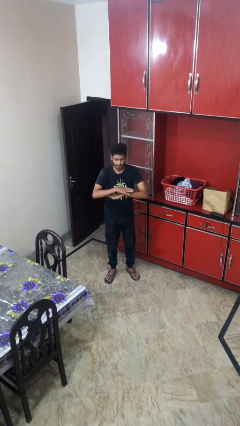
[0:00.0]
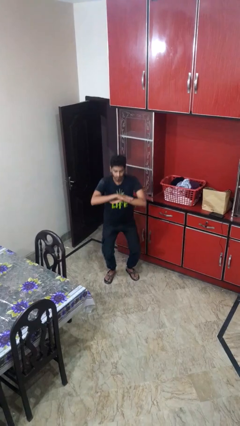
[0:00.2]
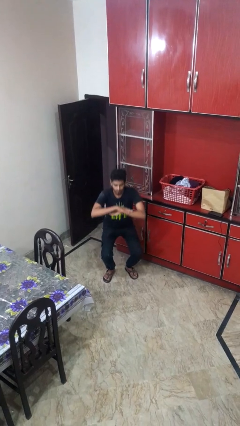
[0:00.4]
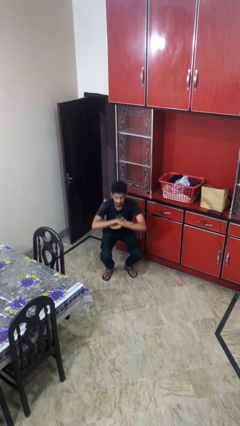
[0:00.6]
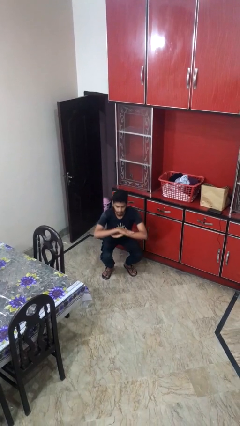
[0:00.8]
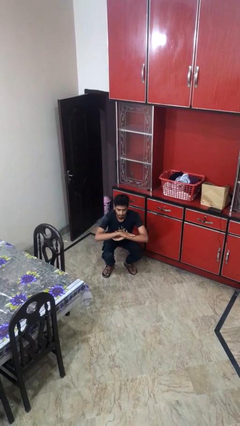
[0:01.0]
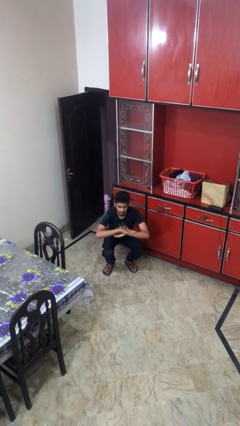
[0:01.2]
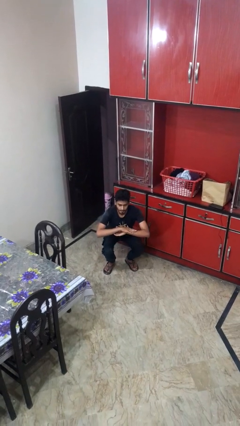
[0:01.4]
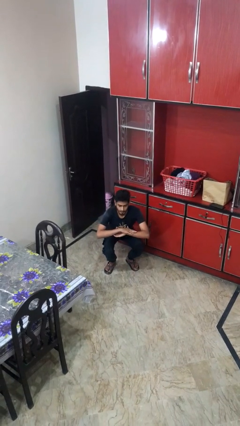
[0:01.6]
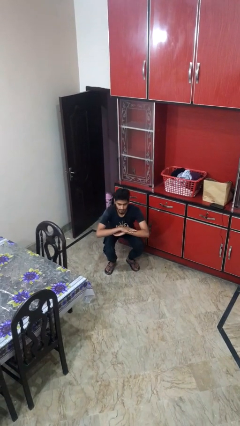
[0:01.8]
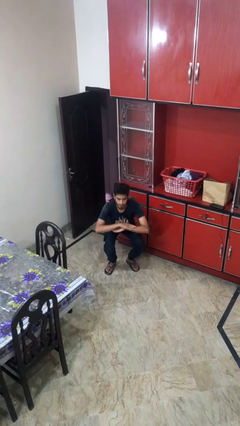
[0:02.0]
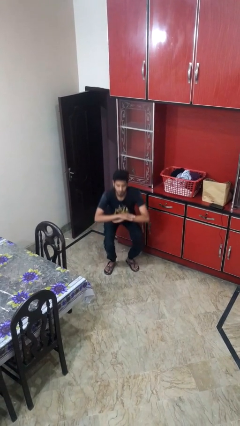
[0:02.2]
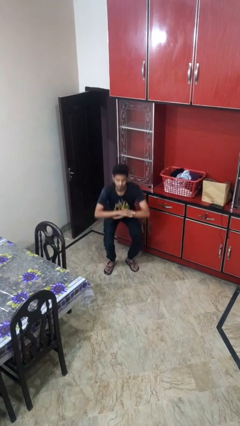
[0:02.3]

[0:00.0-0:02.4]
person squats

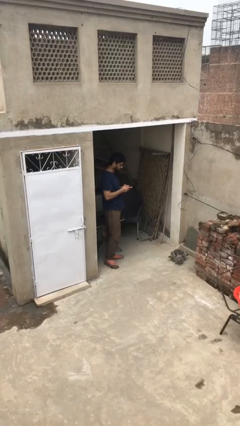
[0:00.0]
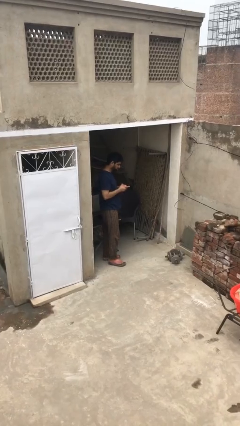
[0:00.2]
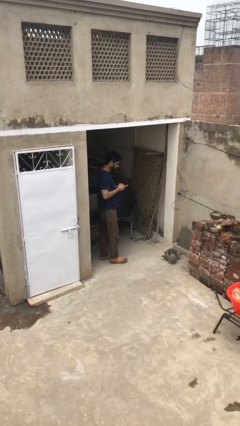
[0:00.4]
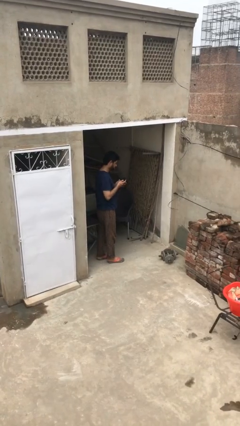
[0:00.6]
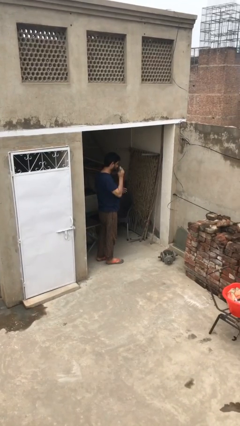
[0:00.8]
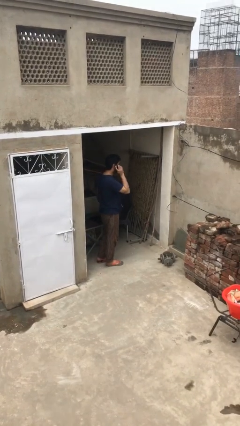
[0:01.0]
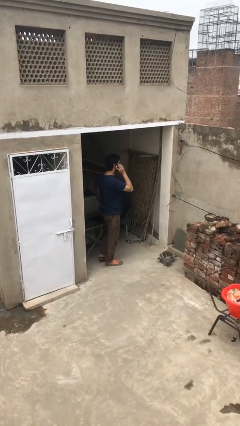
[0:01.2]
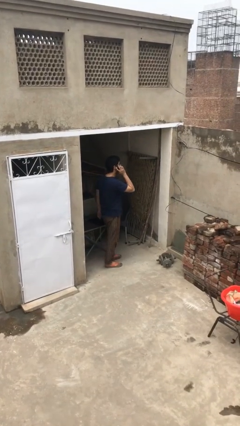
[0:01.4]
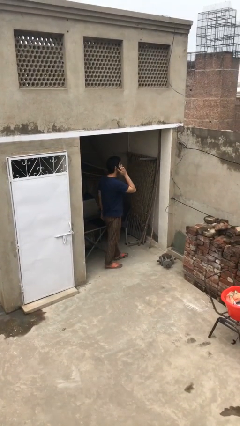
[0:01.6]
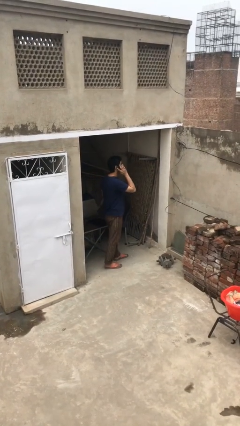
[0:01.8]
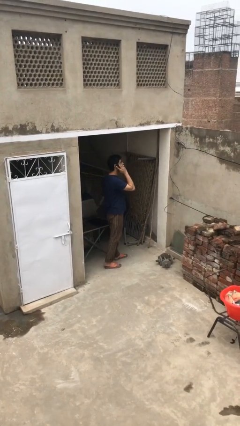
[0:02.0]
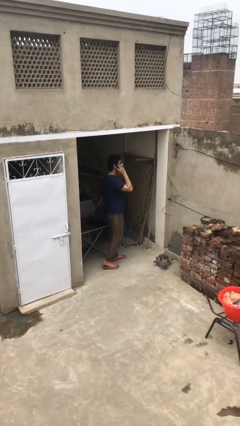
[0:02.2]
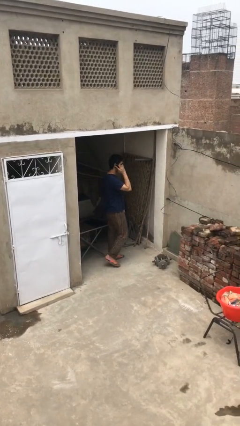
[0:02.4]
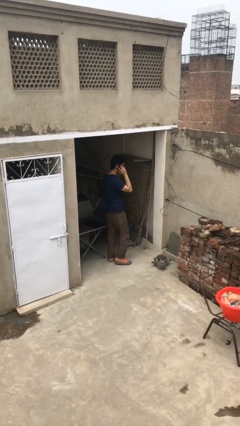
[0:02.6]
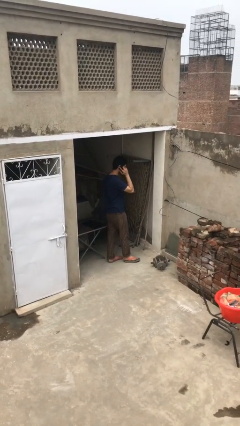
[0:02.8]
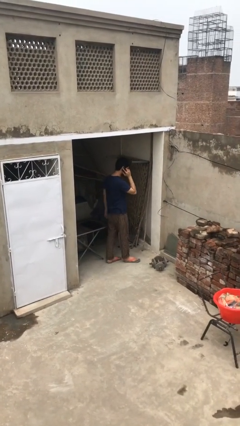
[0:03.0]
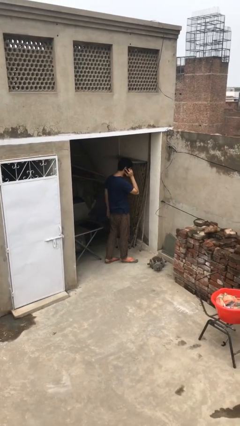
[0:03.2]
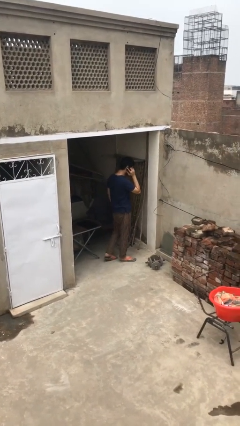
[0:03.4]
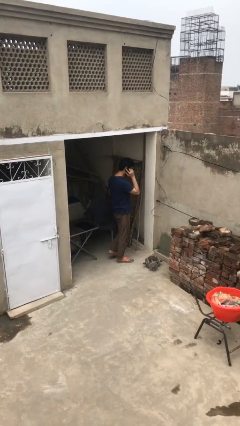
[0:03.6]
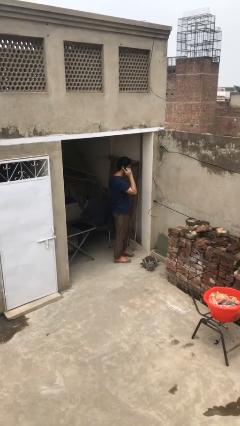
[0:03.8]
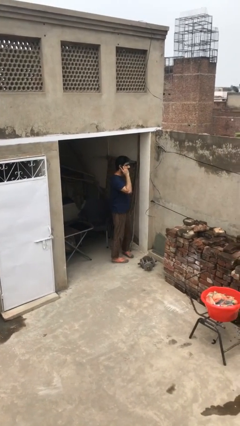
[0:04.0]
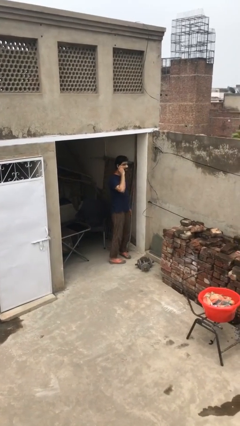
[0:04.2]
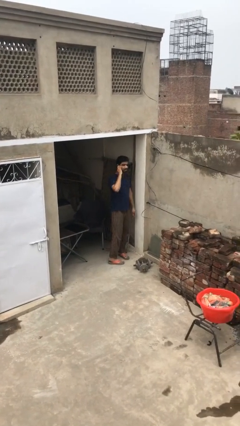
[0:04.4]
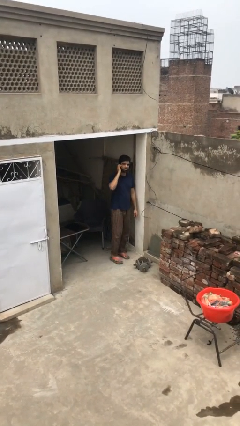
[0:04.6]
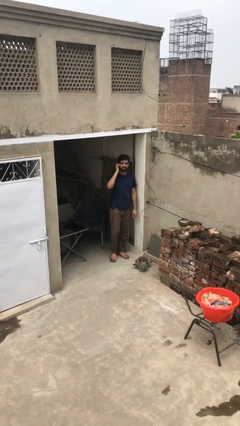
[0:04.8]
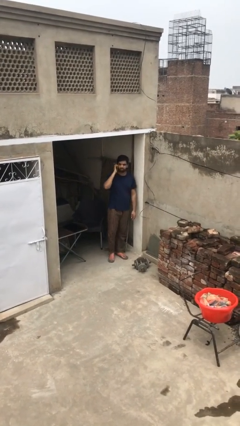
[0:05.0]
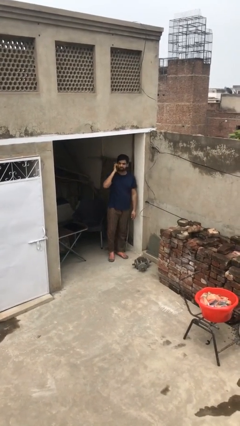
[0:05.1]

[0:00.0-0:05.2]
person talks on phone

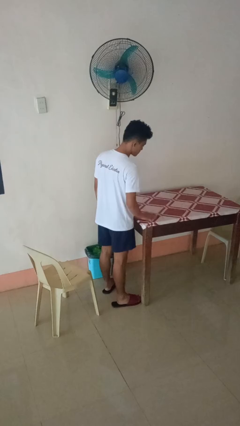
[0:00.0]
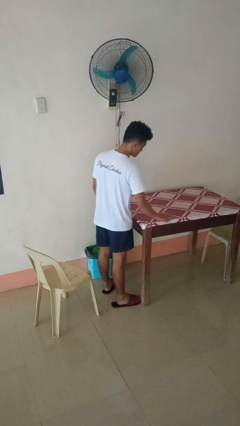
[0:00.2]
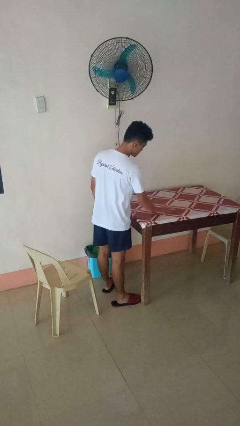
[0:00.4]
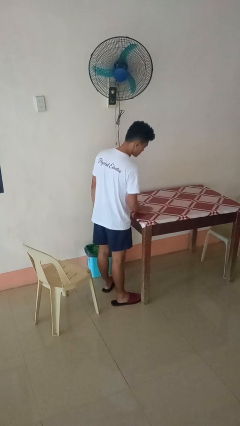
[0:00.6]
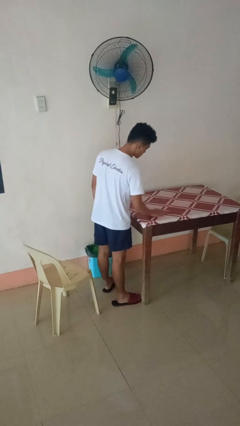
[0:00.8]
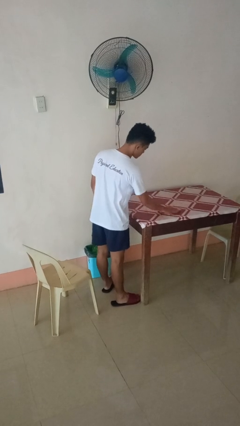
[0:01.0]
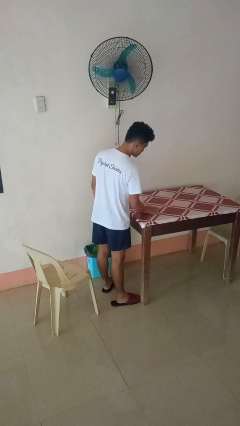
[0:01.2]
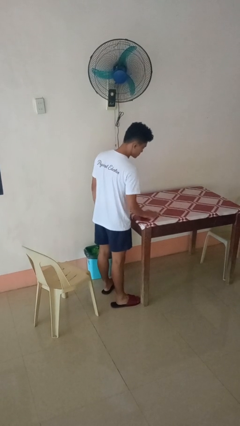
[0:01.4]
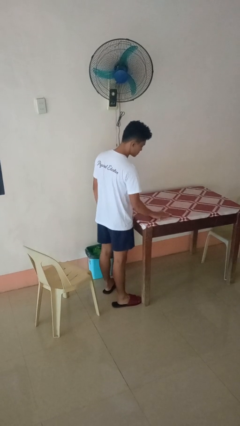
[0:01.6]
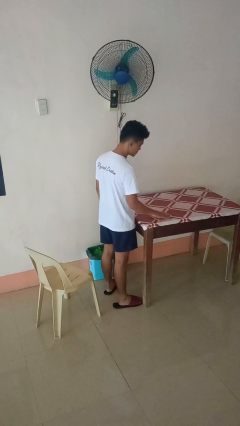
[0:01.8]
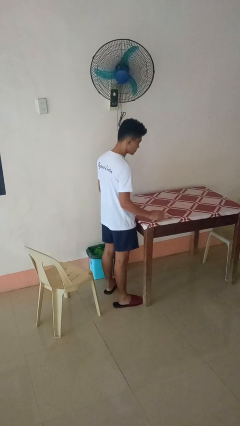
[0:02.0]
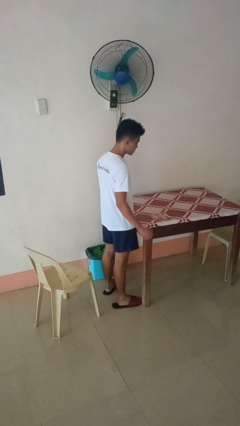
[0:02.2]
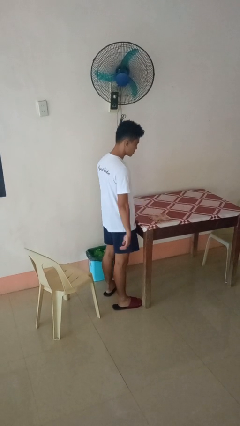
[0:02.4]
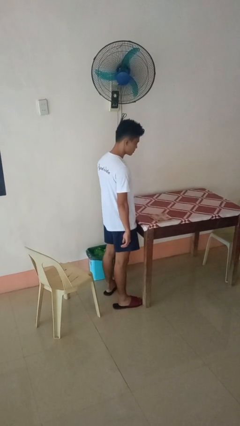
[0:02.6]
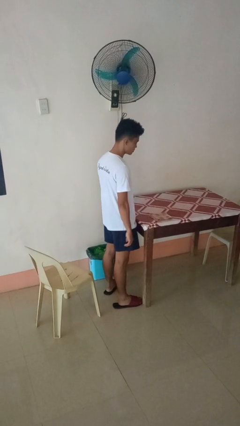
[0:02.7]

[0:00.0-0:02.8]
person cleans table with rag

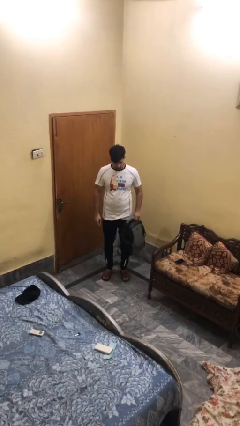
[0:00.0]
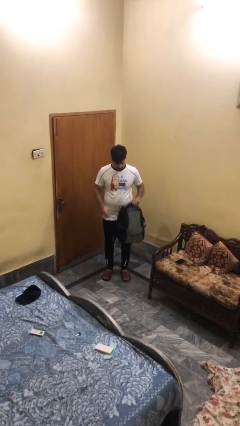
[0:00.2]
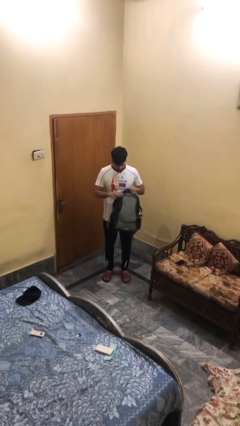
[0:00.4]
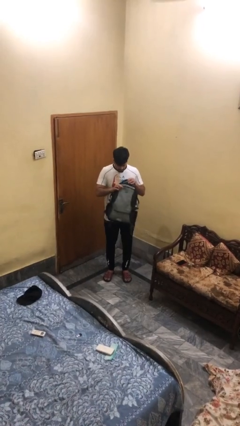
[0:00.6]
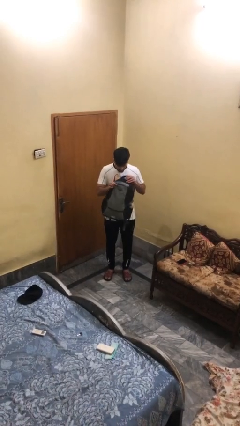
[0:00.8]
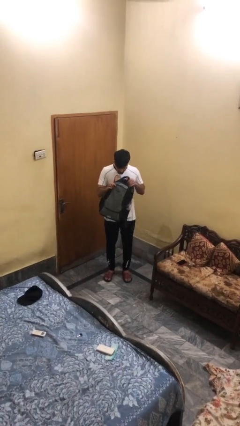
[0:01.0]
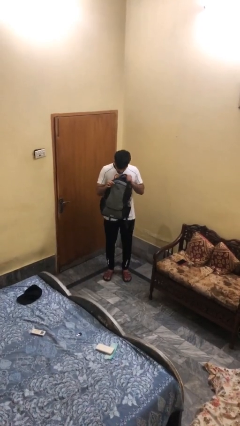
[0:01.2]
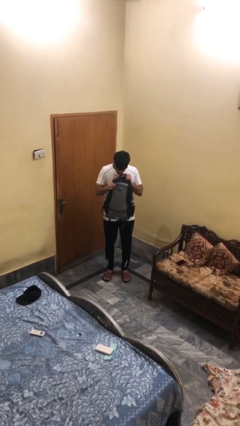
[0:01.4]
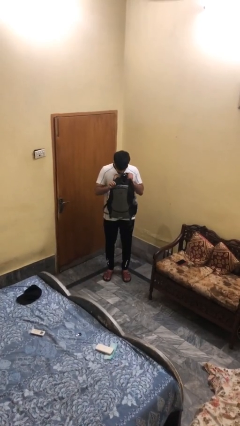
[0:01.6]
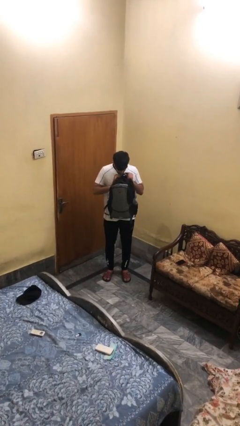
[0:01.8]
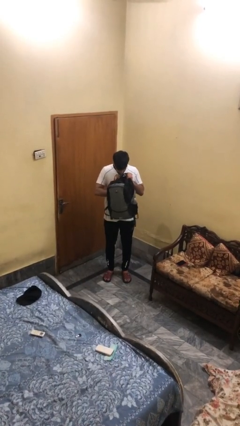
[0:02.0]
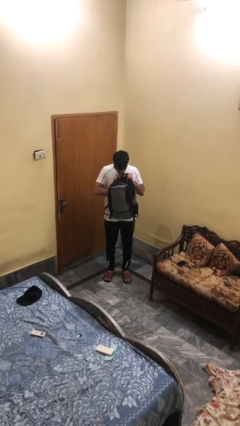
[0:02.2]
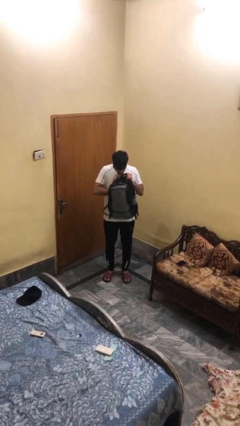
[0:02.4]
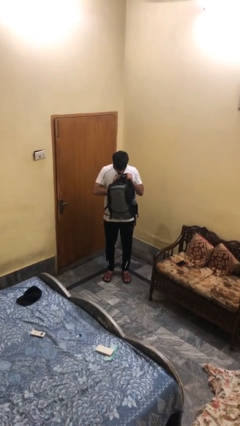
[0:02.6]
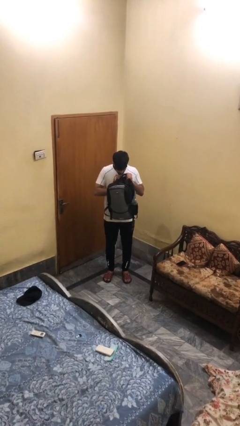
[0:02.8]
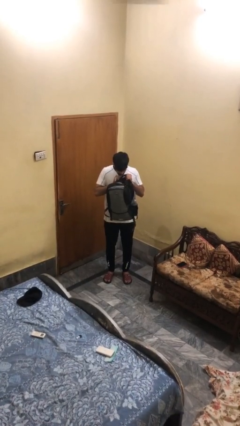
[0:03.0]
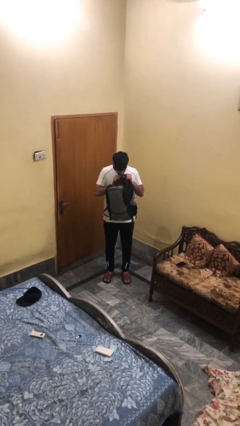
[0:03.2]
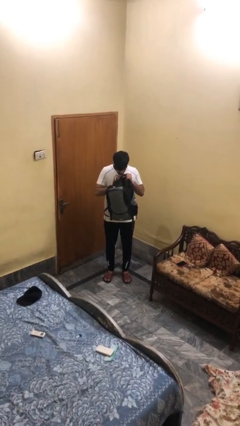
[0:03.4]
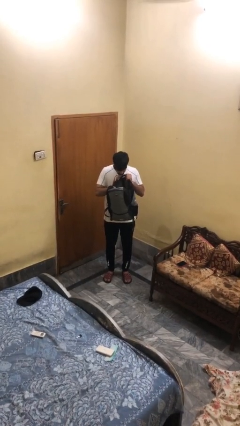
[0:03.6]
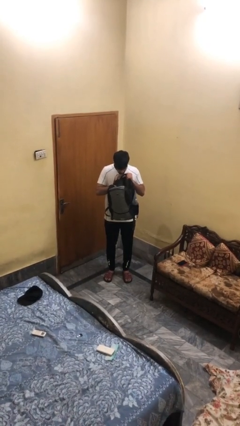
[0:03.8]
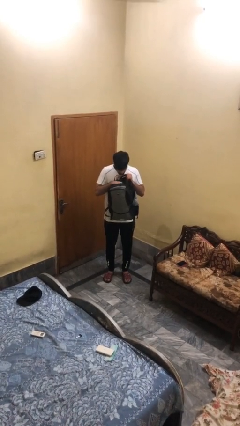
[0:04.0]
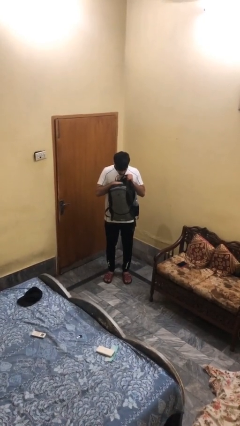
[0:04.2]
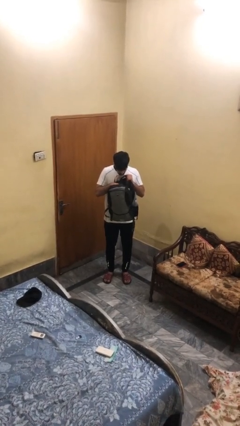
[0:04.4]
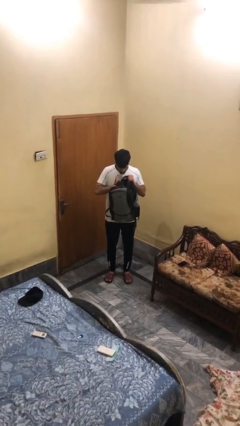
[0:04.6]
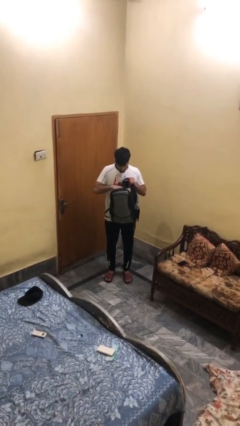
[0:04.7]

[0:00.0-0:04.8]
person searches in backpack

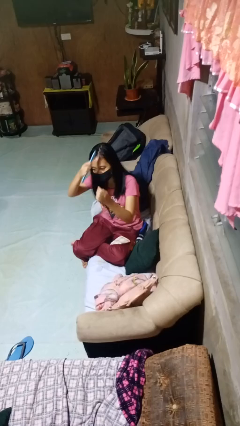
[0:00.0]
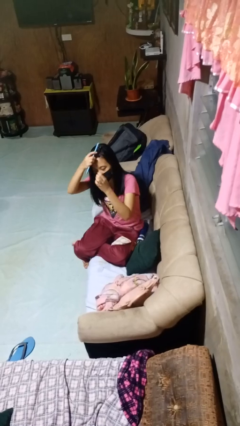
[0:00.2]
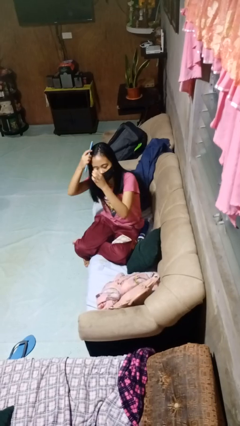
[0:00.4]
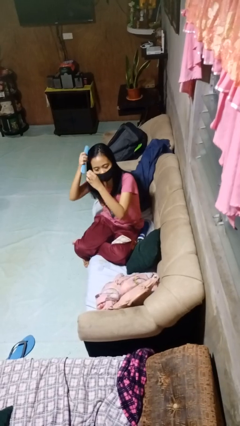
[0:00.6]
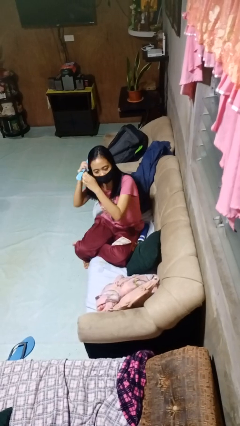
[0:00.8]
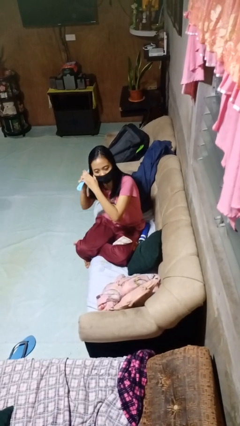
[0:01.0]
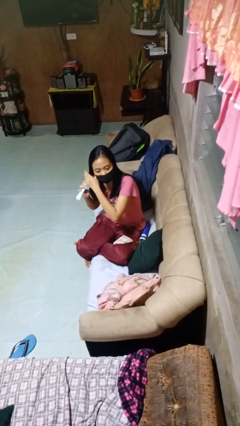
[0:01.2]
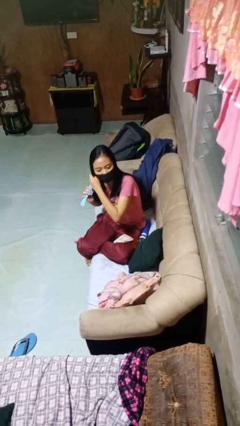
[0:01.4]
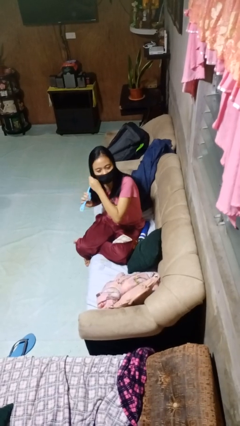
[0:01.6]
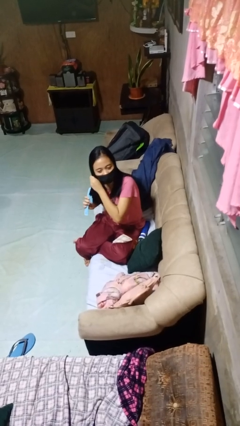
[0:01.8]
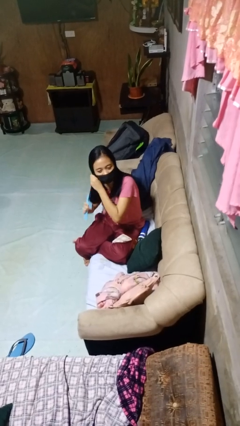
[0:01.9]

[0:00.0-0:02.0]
person brushes hair

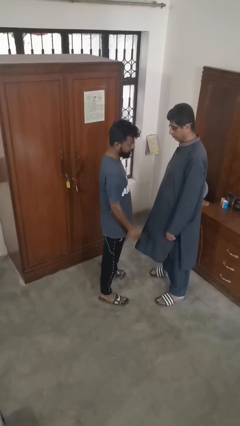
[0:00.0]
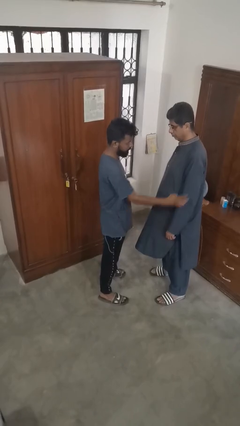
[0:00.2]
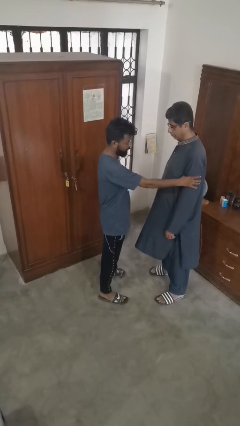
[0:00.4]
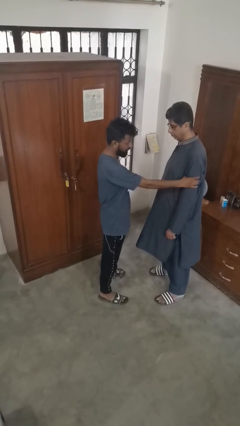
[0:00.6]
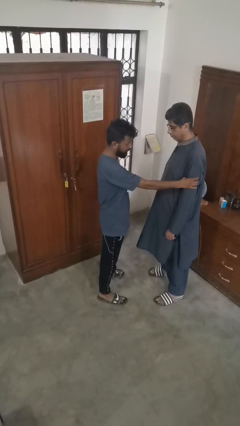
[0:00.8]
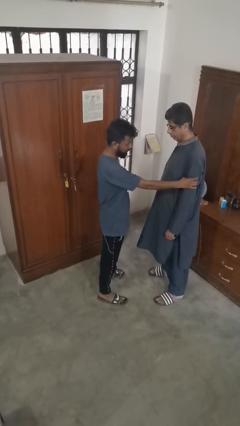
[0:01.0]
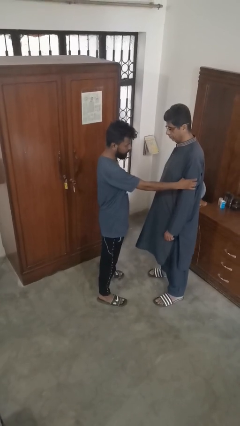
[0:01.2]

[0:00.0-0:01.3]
person grabs person by bicep
